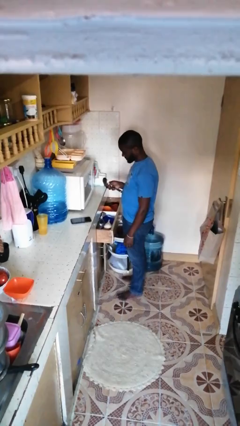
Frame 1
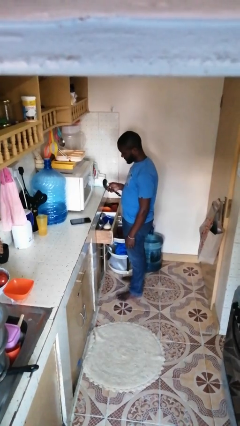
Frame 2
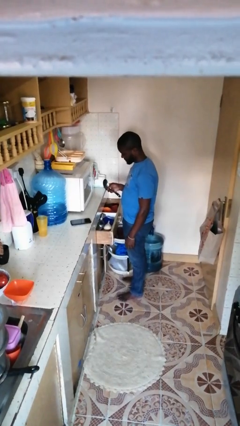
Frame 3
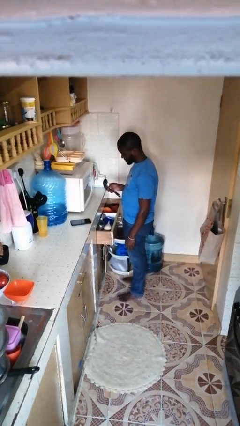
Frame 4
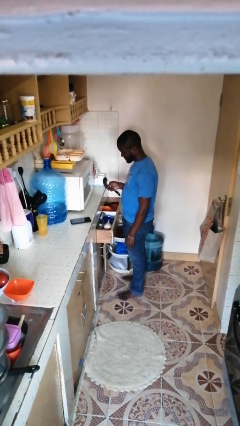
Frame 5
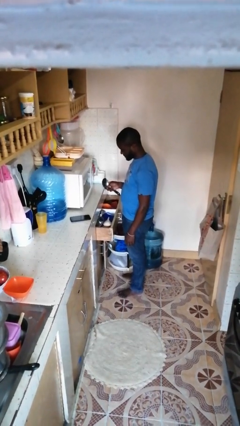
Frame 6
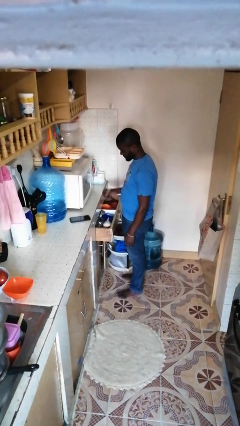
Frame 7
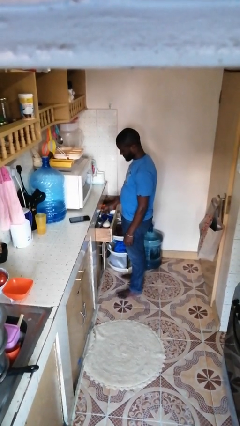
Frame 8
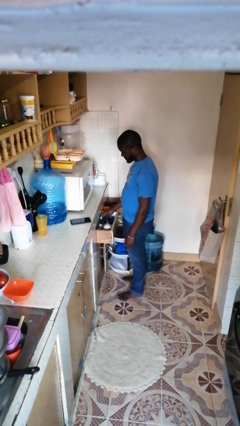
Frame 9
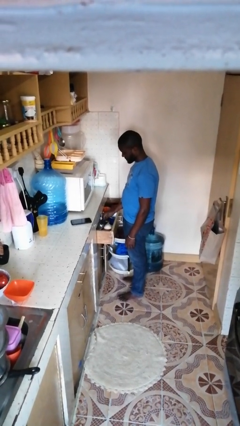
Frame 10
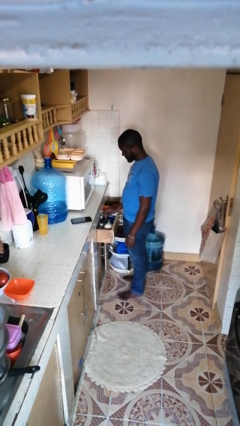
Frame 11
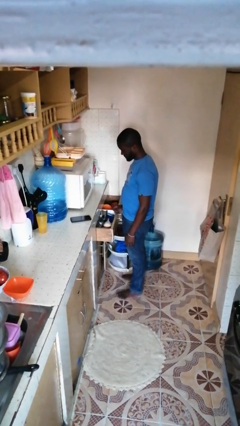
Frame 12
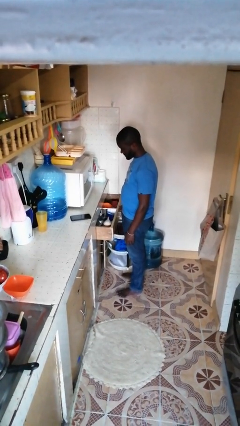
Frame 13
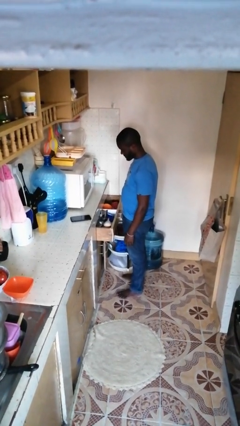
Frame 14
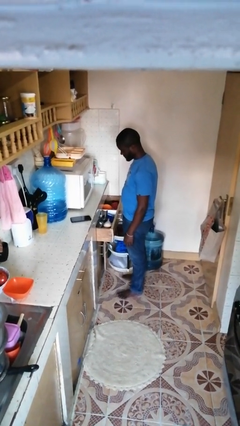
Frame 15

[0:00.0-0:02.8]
person puts object into kitchen drawer

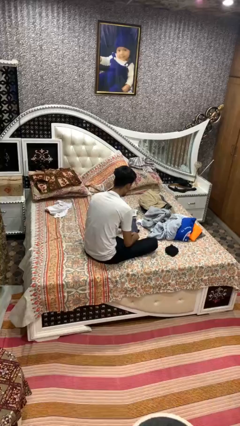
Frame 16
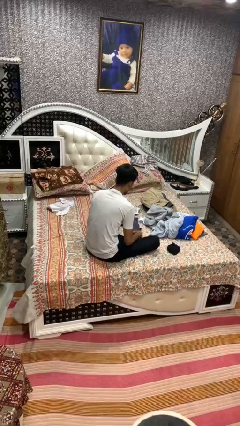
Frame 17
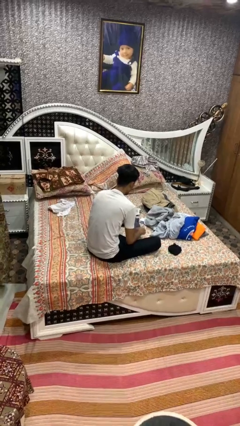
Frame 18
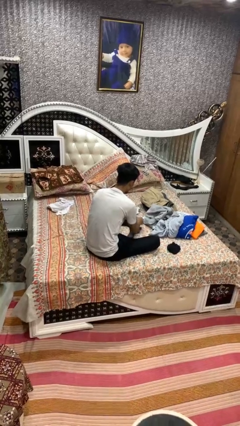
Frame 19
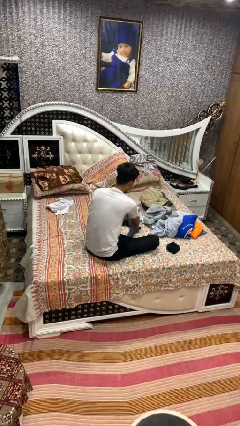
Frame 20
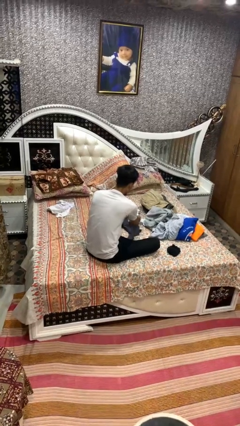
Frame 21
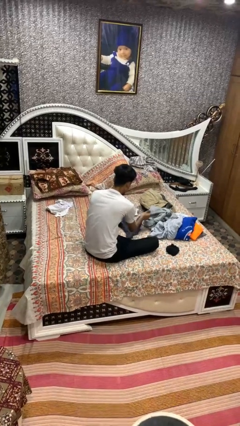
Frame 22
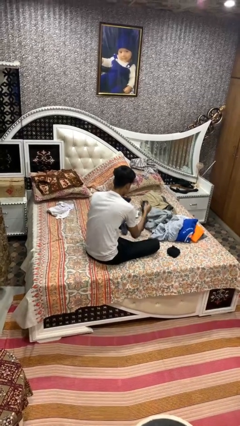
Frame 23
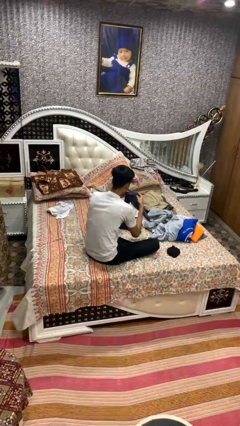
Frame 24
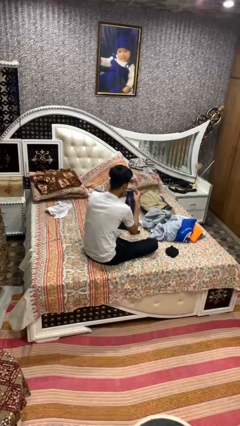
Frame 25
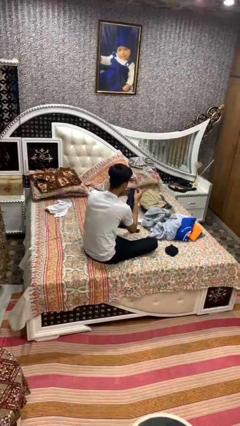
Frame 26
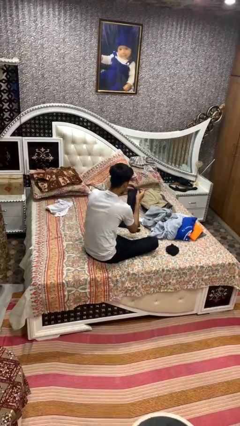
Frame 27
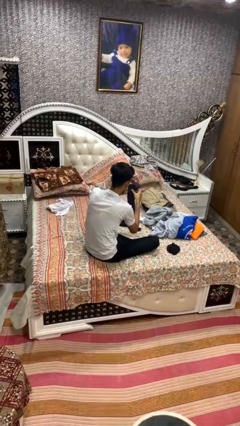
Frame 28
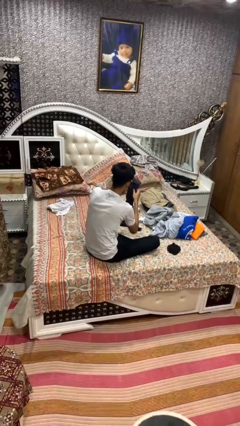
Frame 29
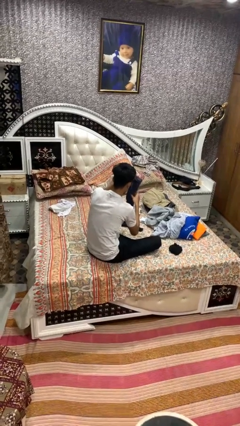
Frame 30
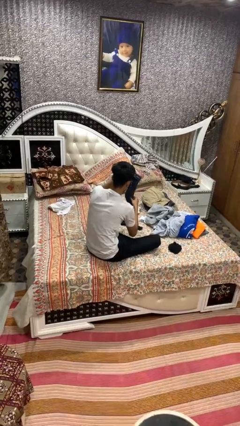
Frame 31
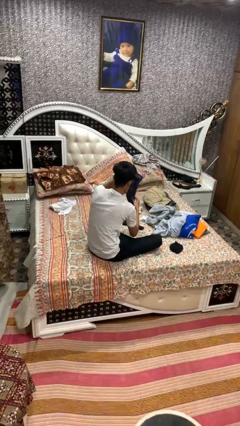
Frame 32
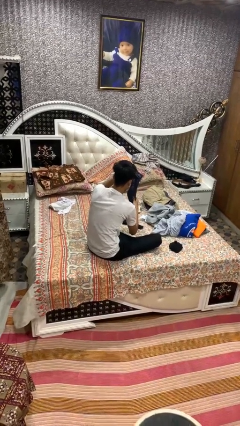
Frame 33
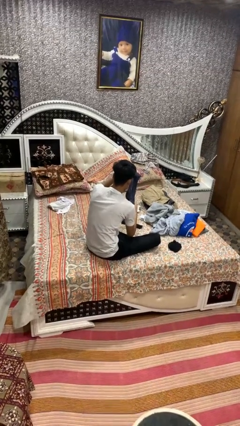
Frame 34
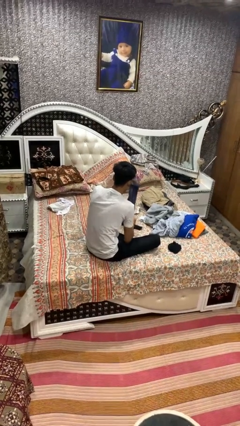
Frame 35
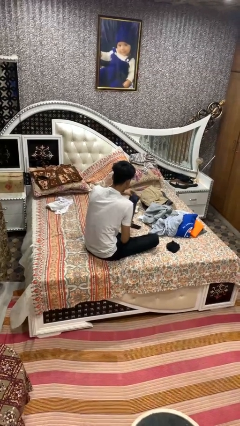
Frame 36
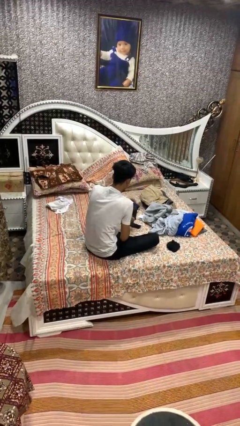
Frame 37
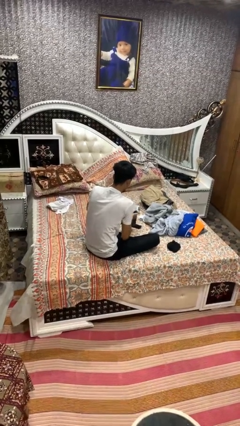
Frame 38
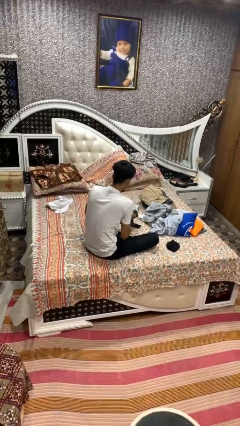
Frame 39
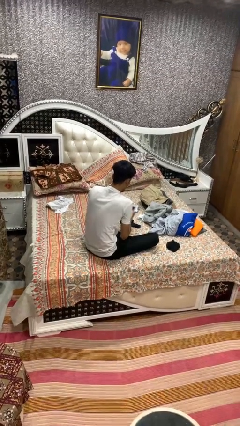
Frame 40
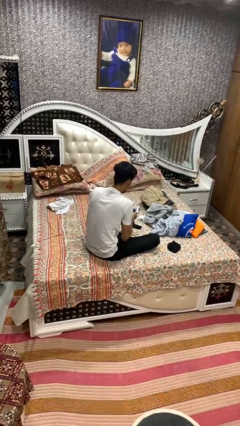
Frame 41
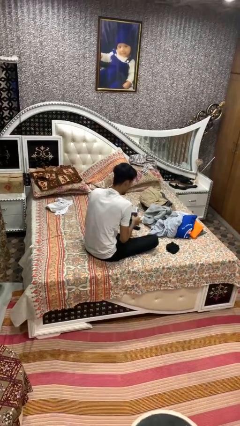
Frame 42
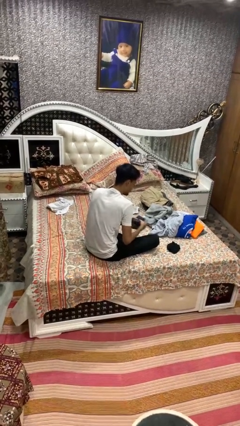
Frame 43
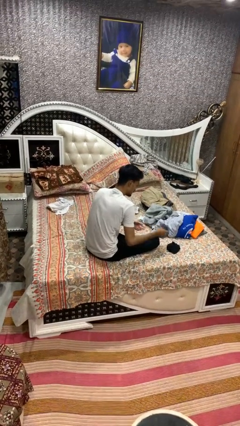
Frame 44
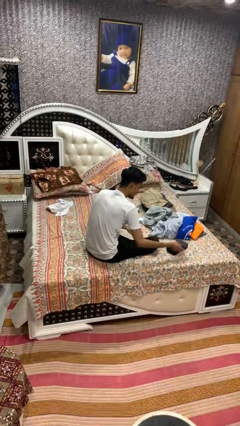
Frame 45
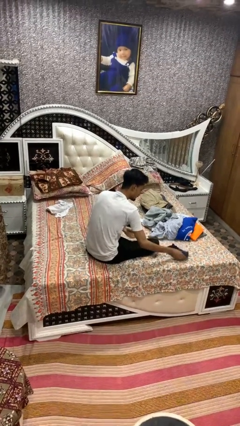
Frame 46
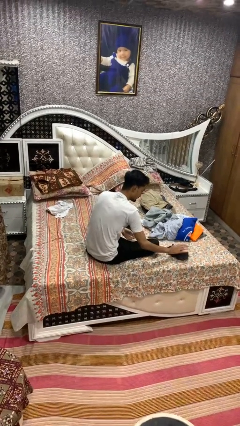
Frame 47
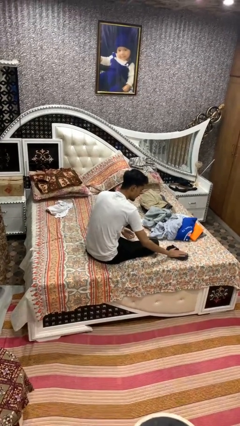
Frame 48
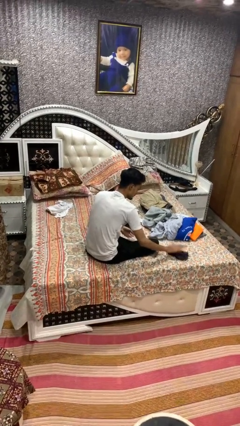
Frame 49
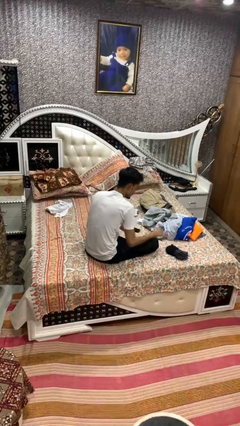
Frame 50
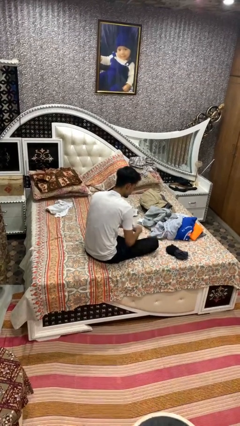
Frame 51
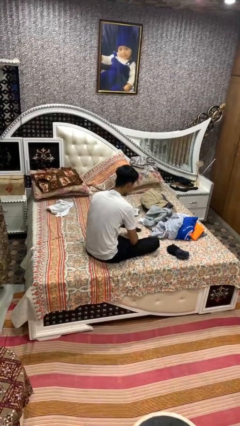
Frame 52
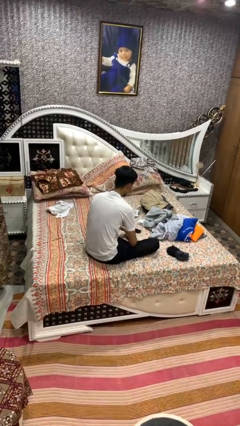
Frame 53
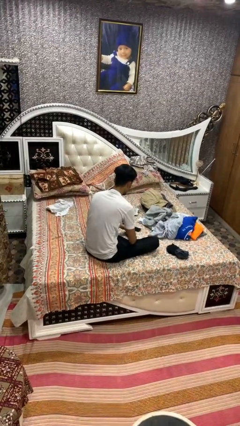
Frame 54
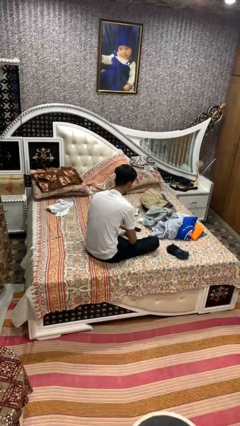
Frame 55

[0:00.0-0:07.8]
person folds socks

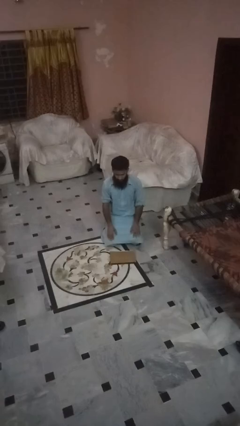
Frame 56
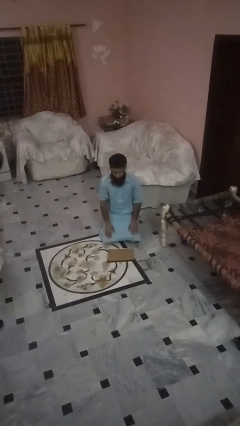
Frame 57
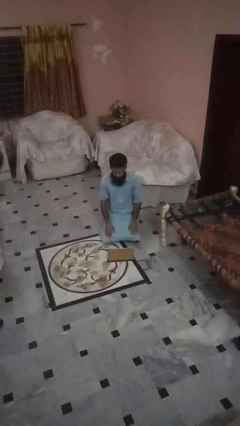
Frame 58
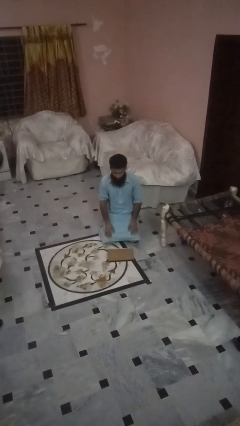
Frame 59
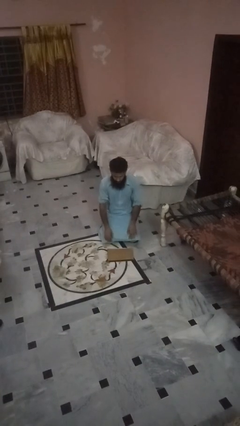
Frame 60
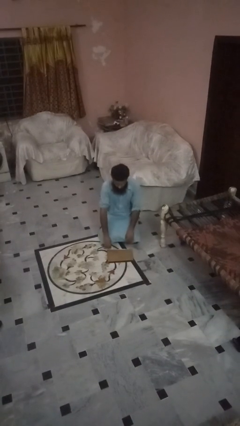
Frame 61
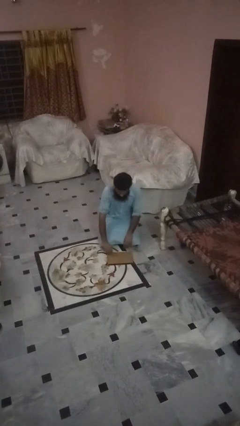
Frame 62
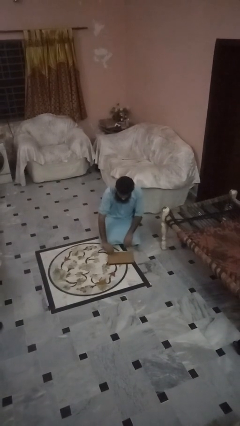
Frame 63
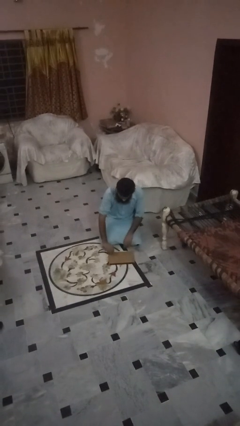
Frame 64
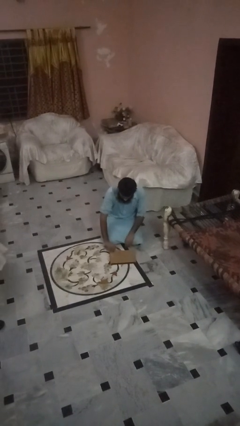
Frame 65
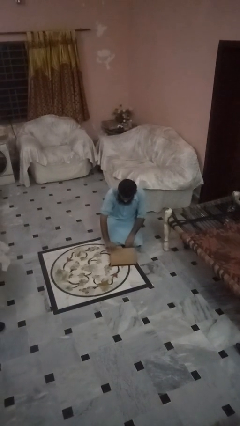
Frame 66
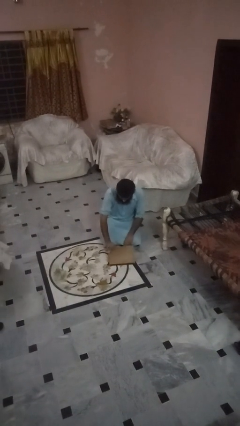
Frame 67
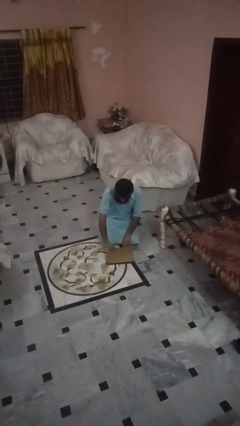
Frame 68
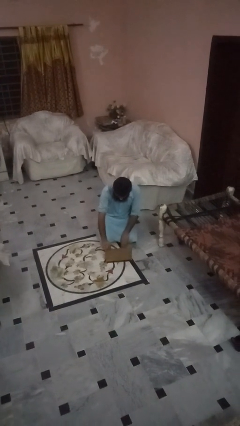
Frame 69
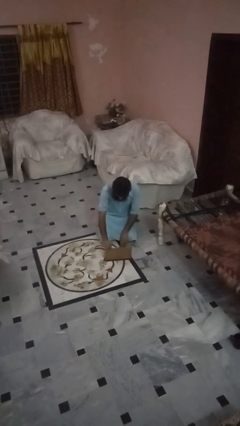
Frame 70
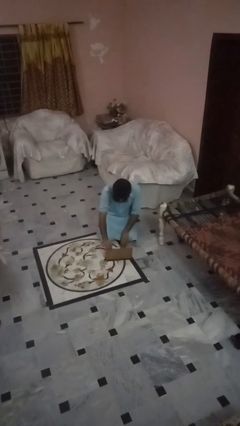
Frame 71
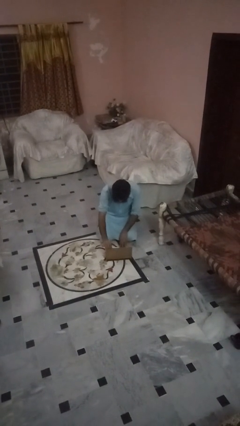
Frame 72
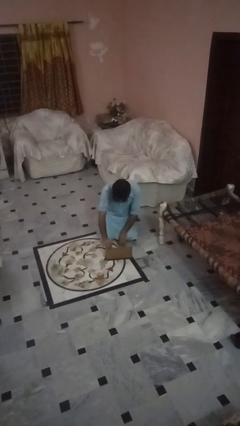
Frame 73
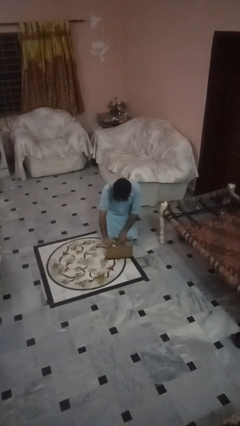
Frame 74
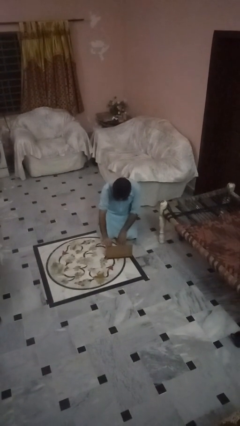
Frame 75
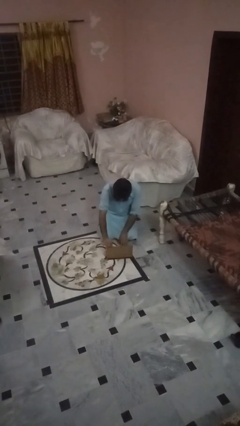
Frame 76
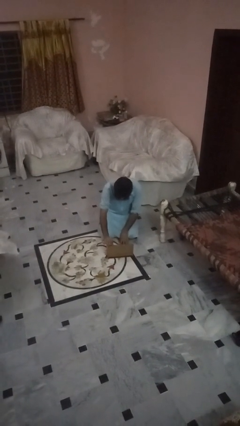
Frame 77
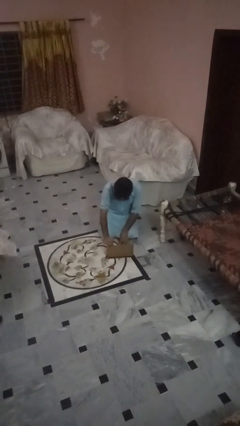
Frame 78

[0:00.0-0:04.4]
person opens laptop

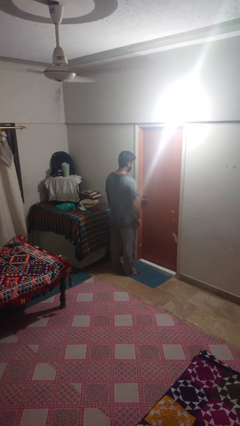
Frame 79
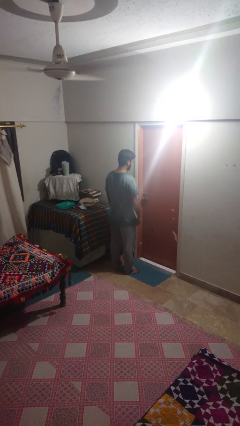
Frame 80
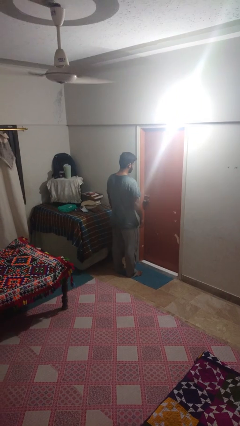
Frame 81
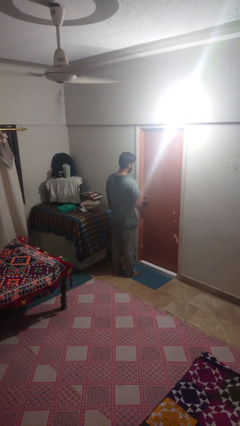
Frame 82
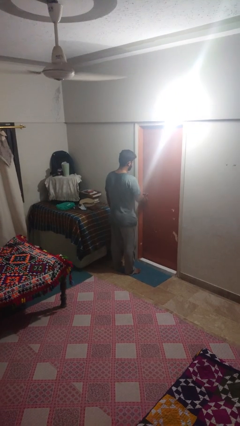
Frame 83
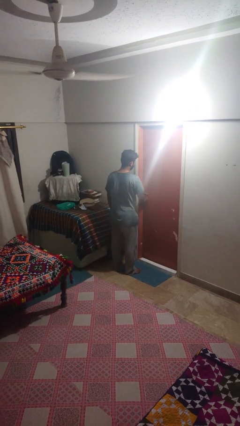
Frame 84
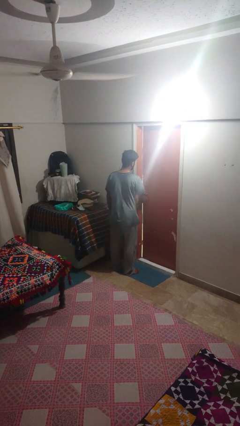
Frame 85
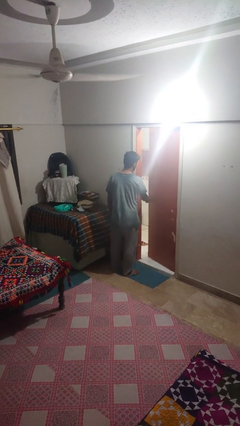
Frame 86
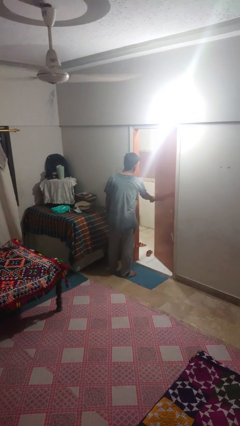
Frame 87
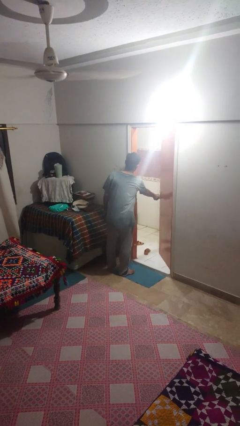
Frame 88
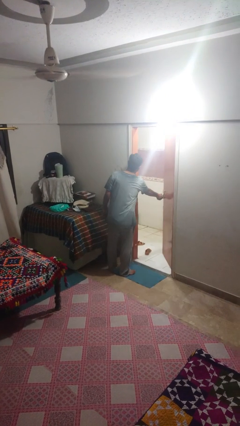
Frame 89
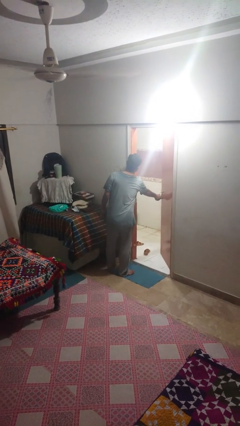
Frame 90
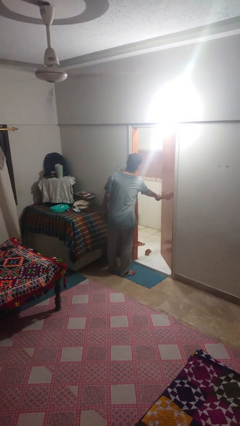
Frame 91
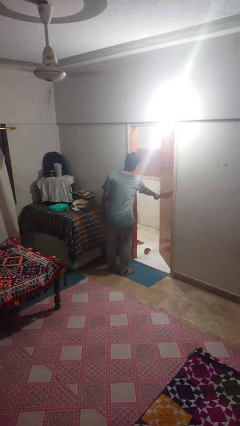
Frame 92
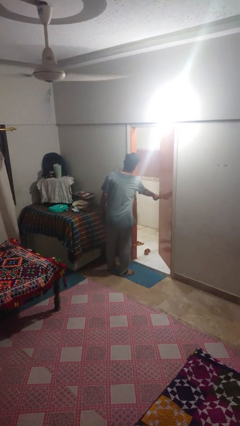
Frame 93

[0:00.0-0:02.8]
person opens facility door
